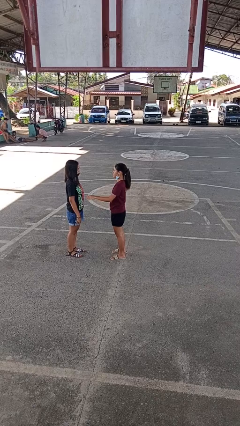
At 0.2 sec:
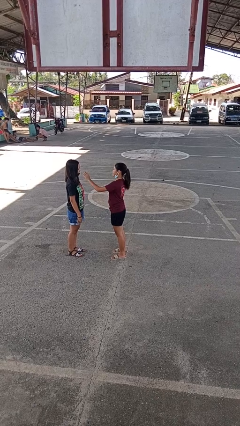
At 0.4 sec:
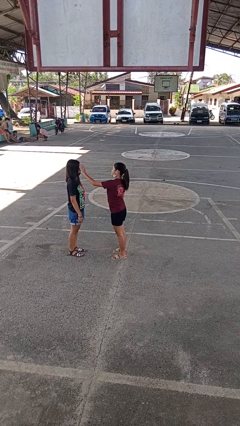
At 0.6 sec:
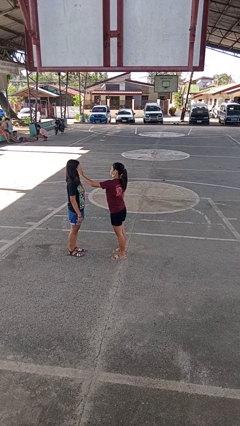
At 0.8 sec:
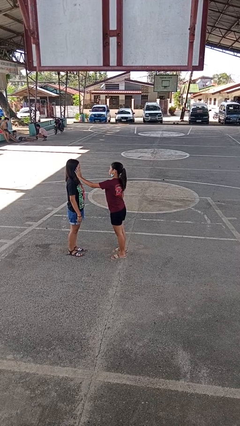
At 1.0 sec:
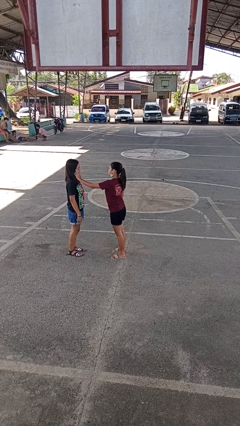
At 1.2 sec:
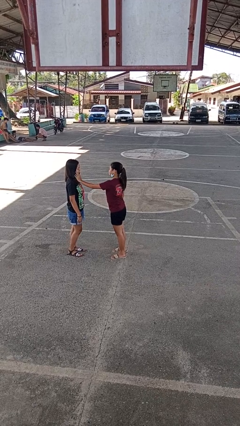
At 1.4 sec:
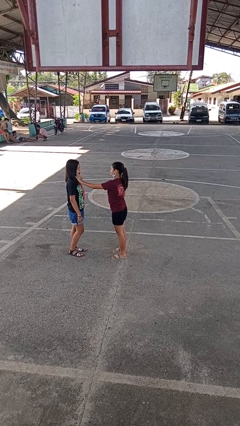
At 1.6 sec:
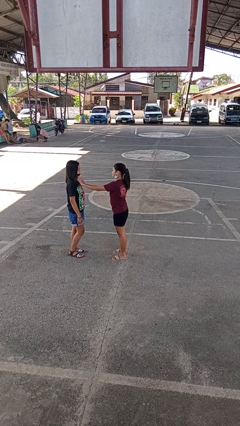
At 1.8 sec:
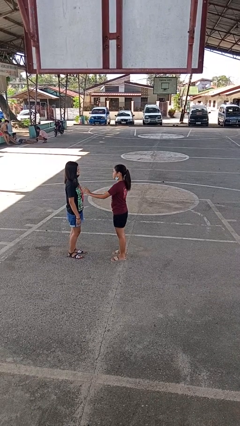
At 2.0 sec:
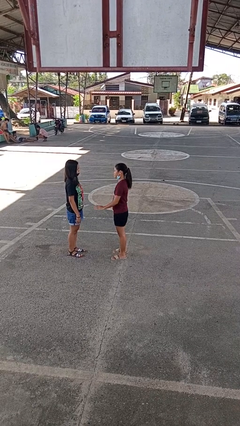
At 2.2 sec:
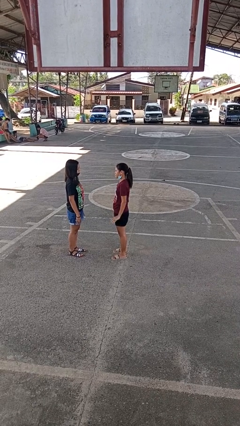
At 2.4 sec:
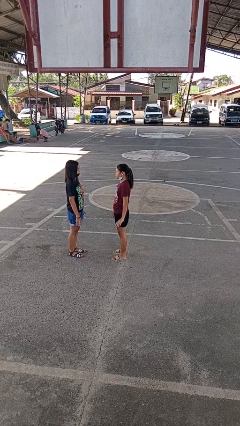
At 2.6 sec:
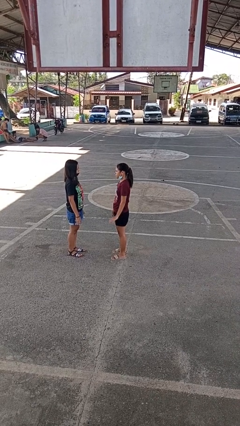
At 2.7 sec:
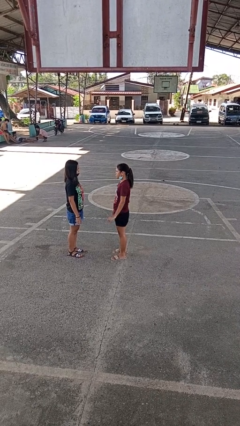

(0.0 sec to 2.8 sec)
person touches face of person

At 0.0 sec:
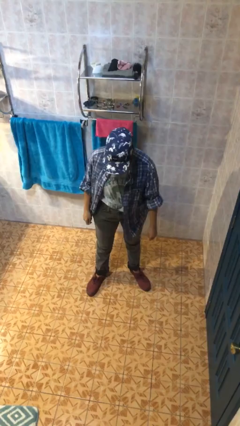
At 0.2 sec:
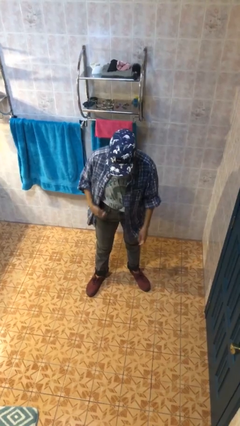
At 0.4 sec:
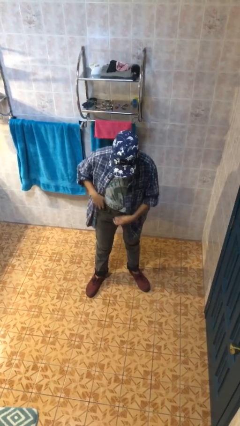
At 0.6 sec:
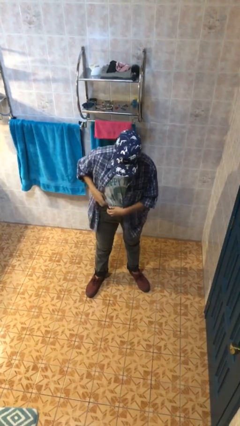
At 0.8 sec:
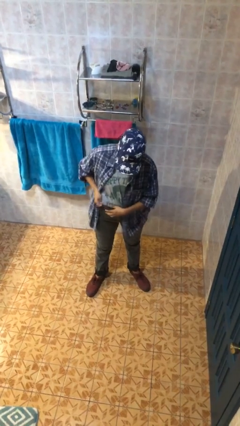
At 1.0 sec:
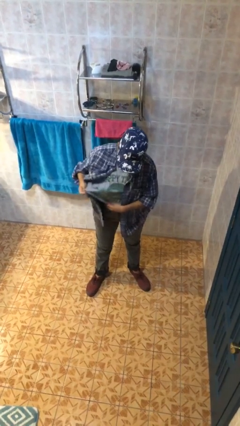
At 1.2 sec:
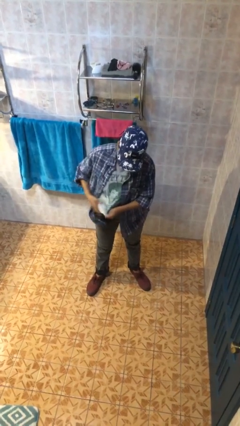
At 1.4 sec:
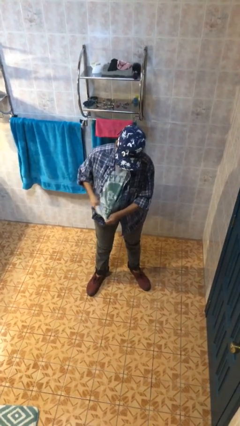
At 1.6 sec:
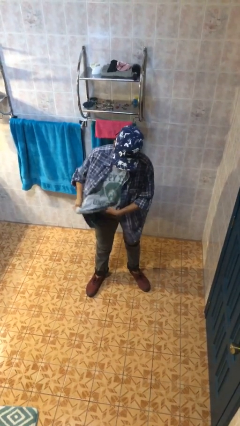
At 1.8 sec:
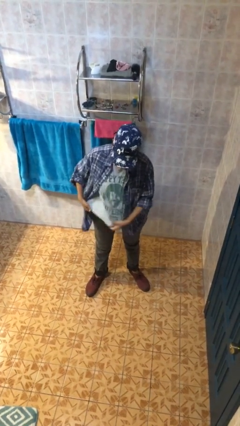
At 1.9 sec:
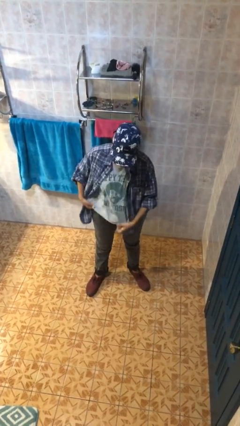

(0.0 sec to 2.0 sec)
person untucks shirt

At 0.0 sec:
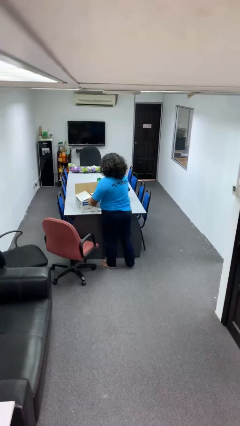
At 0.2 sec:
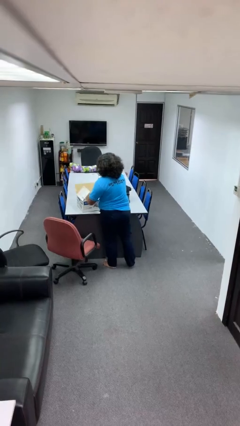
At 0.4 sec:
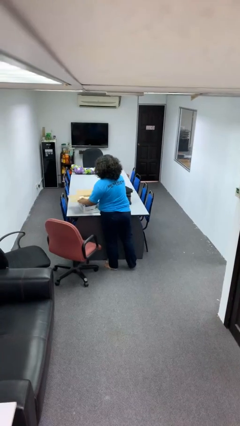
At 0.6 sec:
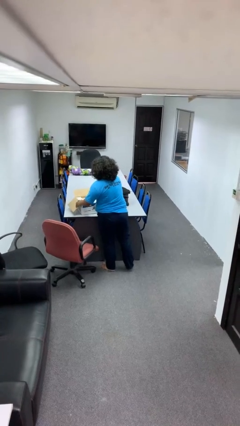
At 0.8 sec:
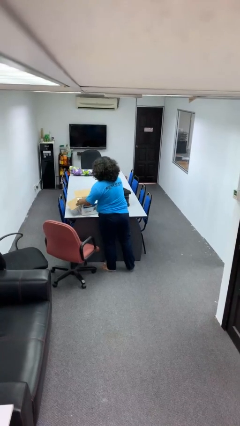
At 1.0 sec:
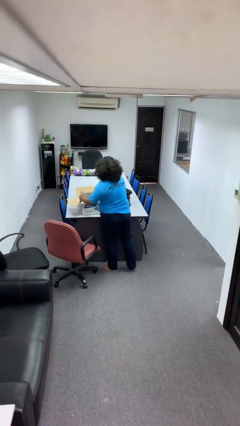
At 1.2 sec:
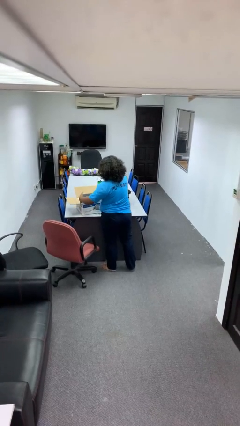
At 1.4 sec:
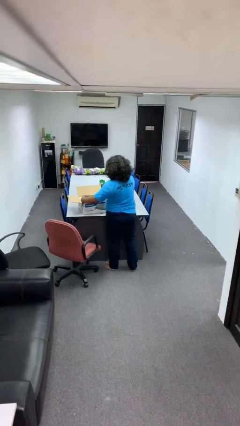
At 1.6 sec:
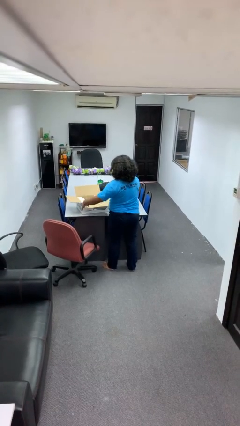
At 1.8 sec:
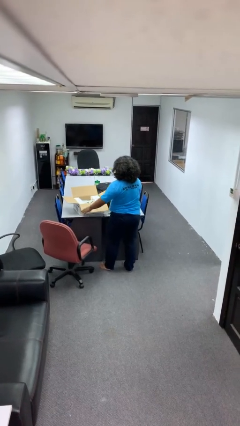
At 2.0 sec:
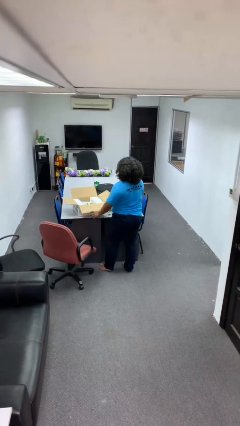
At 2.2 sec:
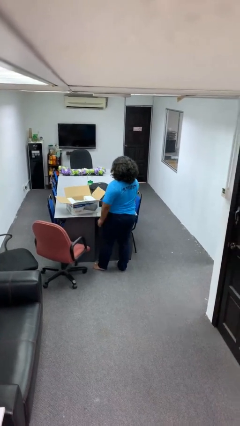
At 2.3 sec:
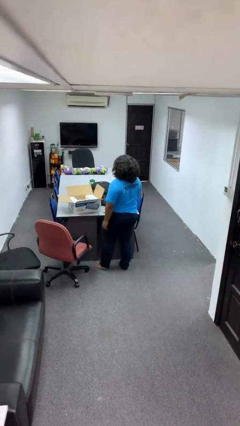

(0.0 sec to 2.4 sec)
person opens box

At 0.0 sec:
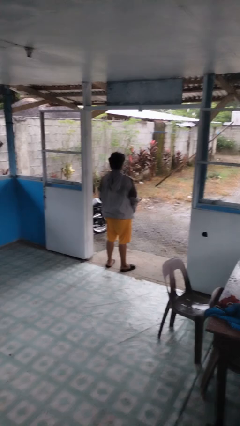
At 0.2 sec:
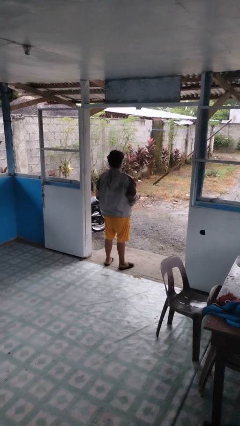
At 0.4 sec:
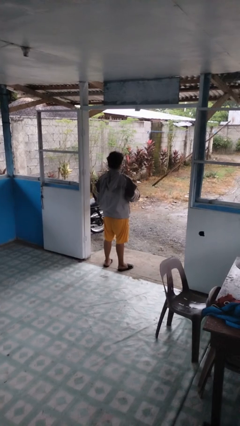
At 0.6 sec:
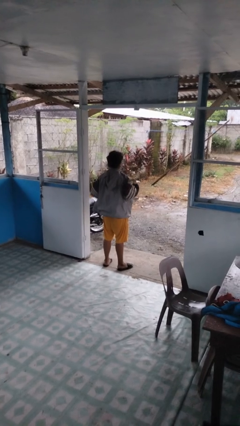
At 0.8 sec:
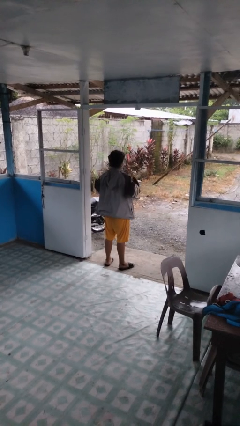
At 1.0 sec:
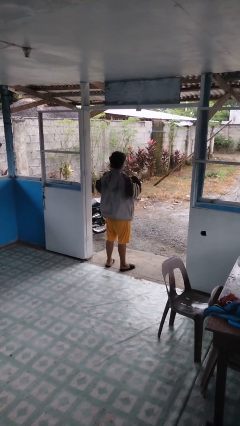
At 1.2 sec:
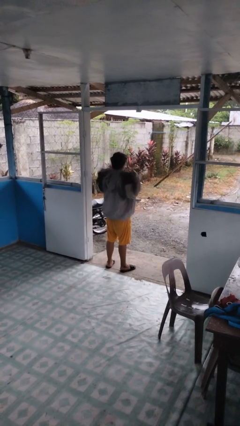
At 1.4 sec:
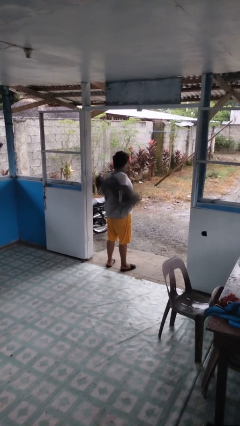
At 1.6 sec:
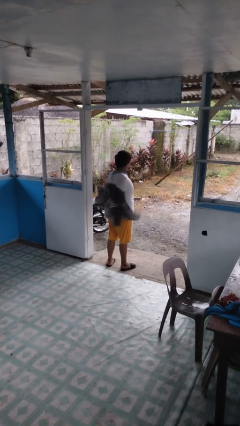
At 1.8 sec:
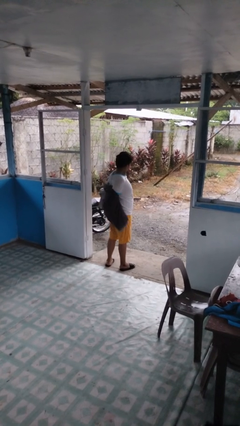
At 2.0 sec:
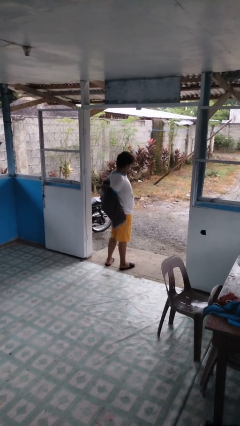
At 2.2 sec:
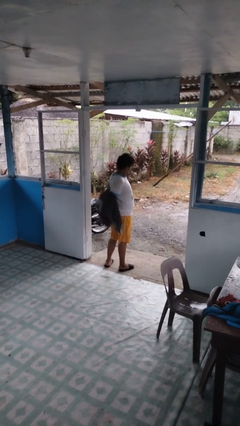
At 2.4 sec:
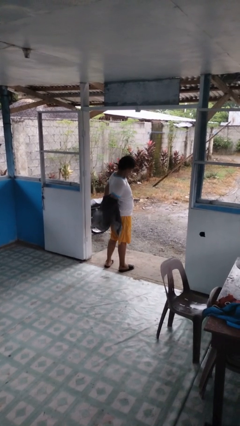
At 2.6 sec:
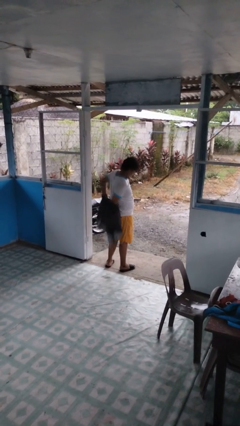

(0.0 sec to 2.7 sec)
person takes off jacket

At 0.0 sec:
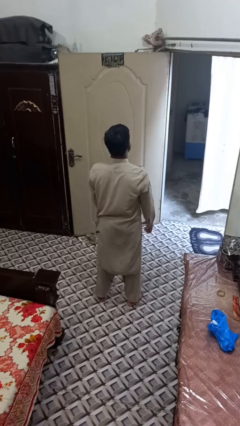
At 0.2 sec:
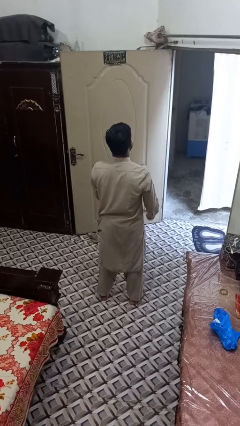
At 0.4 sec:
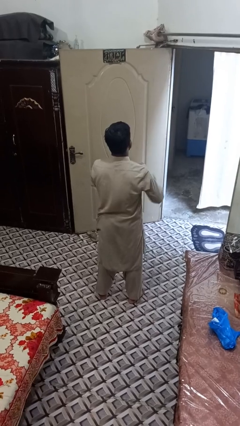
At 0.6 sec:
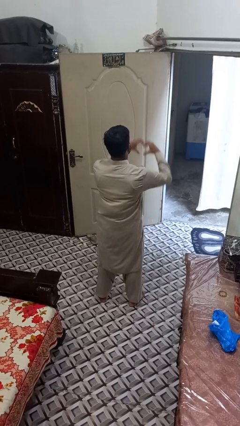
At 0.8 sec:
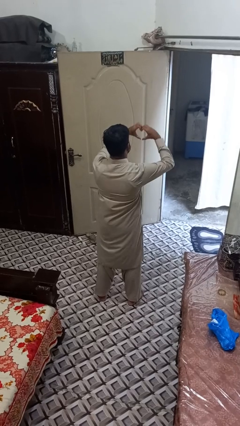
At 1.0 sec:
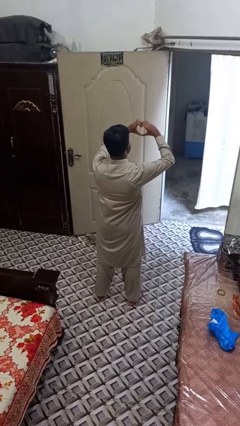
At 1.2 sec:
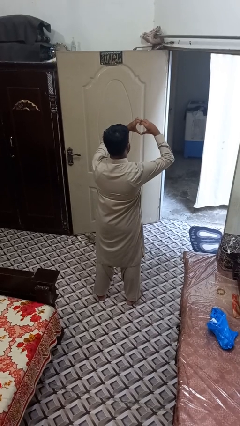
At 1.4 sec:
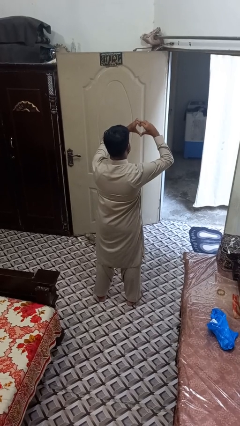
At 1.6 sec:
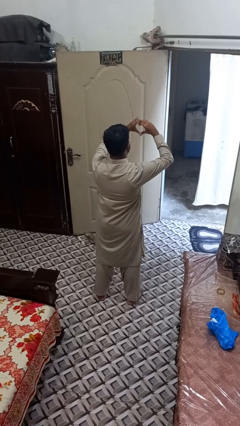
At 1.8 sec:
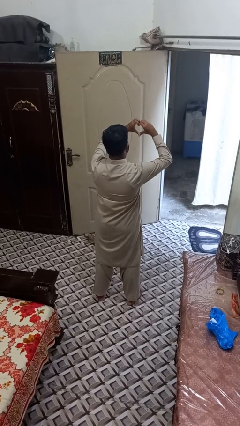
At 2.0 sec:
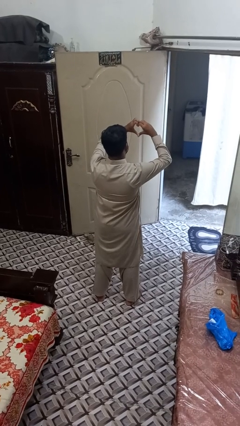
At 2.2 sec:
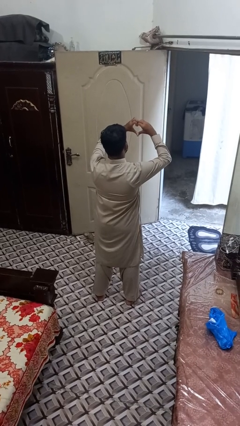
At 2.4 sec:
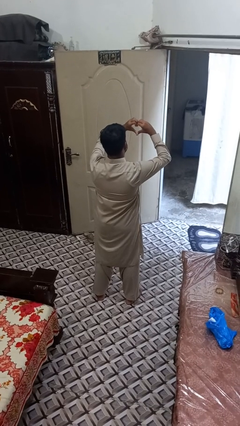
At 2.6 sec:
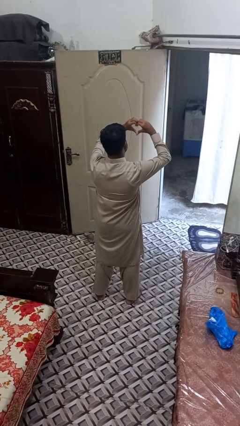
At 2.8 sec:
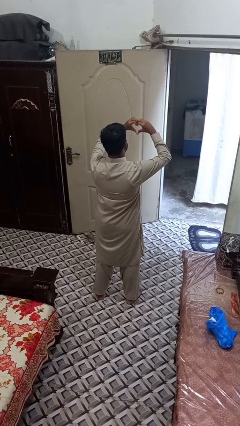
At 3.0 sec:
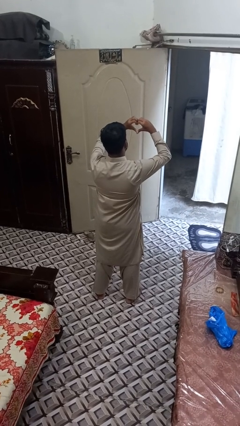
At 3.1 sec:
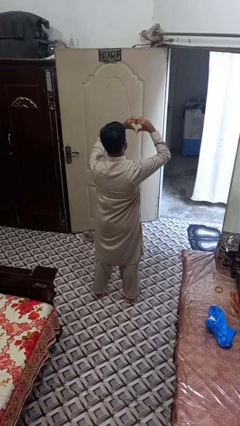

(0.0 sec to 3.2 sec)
person gestures heart

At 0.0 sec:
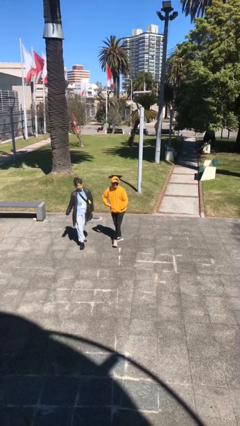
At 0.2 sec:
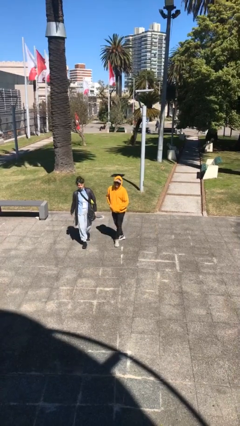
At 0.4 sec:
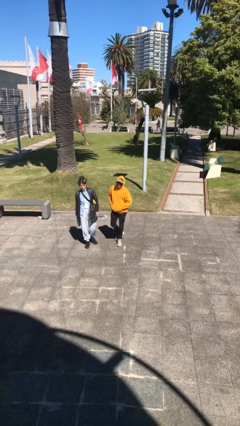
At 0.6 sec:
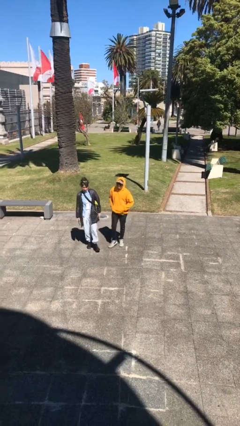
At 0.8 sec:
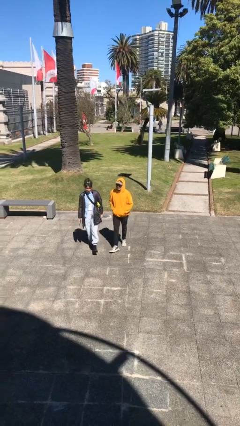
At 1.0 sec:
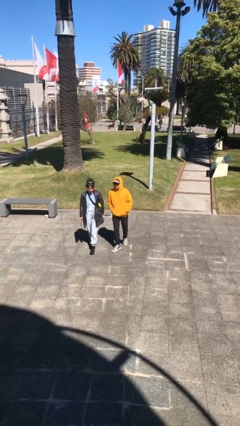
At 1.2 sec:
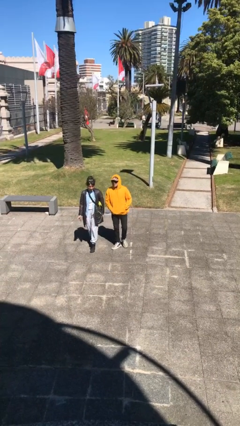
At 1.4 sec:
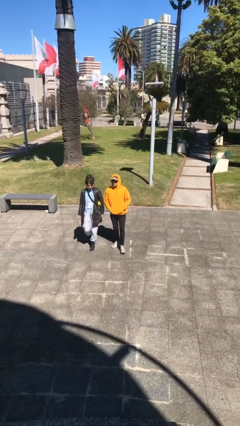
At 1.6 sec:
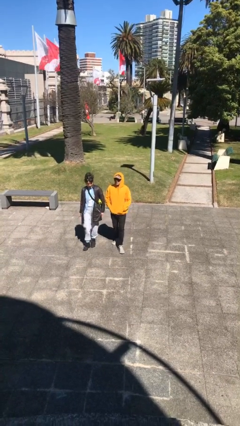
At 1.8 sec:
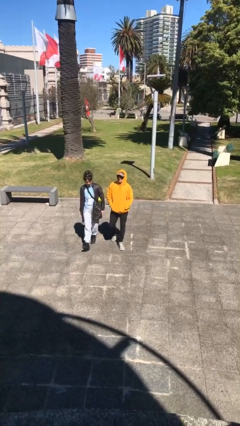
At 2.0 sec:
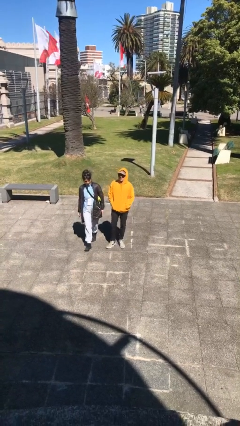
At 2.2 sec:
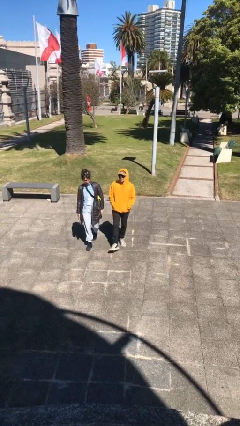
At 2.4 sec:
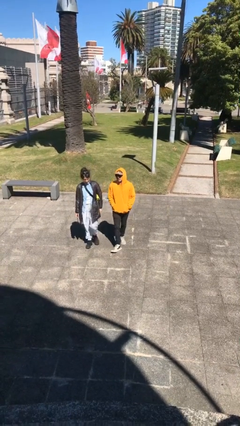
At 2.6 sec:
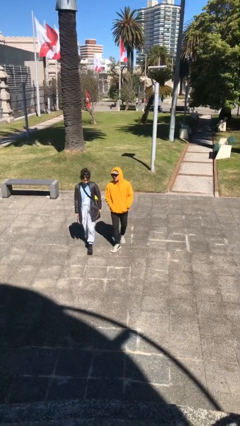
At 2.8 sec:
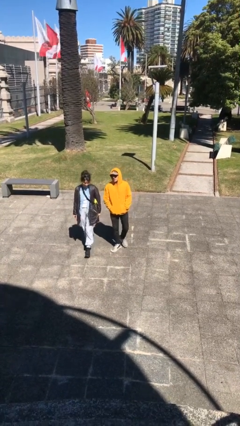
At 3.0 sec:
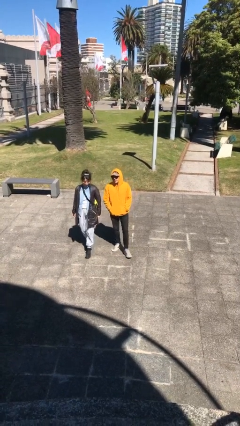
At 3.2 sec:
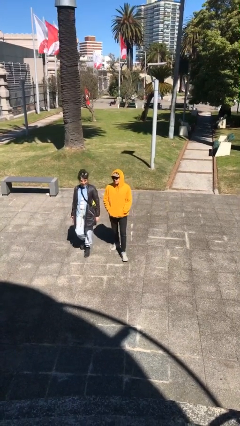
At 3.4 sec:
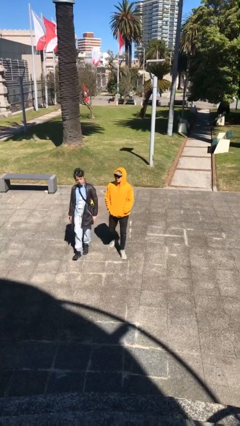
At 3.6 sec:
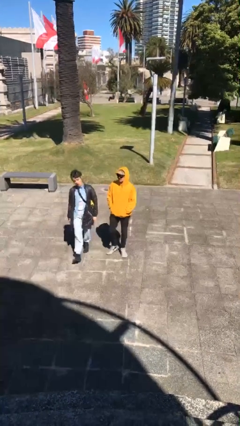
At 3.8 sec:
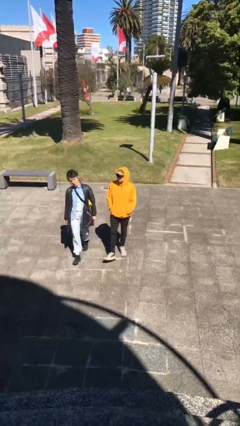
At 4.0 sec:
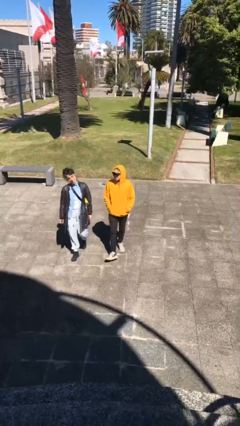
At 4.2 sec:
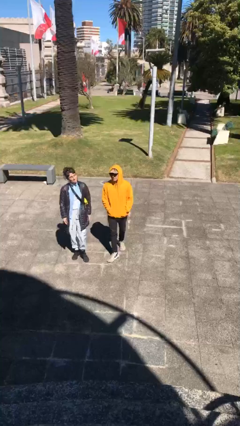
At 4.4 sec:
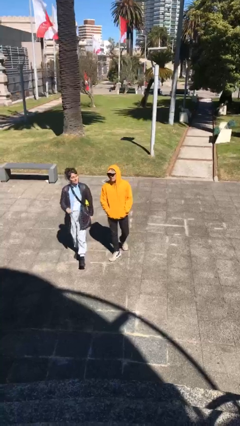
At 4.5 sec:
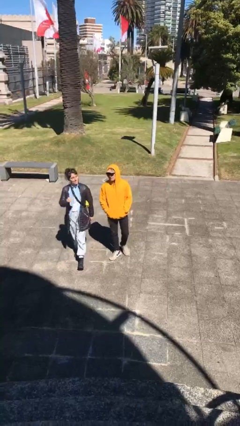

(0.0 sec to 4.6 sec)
person talks to person
